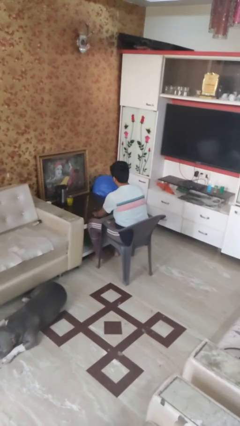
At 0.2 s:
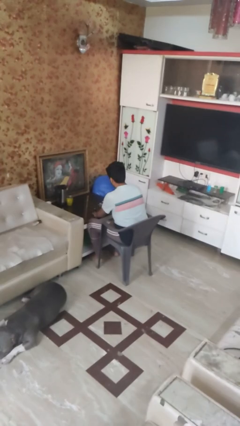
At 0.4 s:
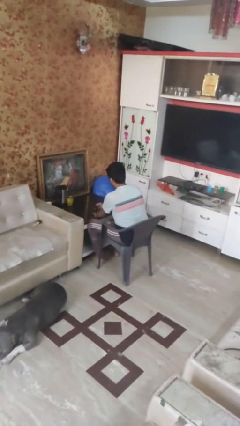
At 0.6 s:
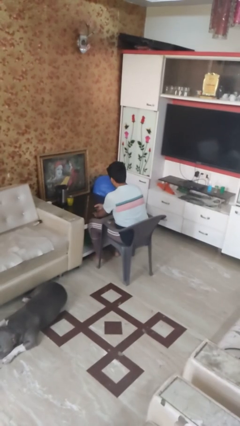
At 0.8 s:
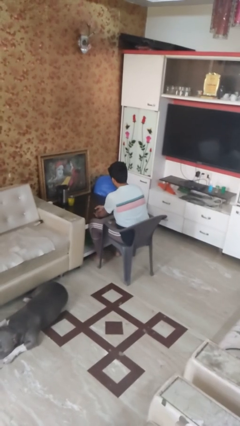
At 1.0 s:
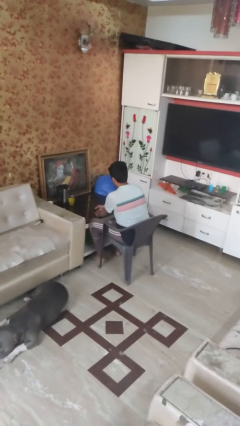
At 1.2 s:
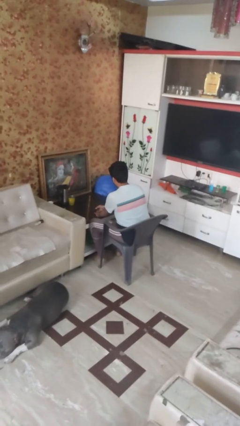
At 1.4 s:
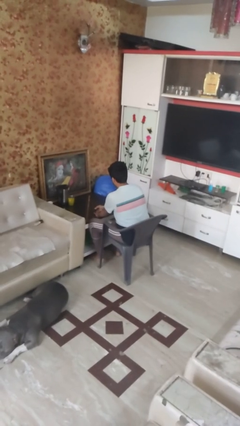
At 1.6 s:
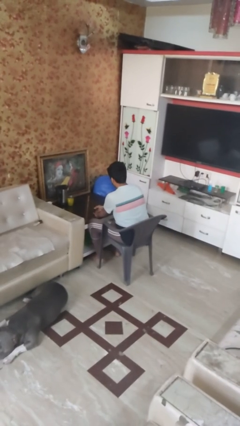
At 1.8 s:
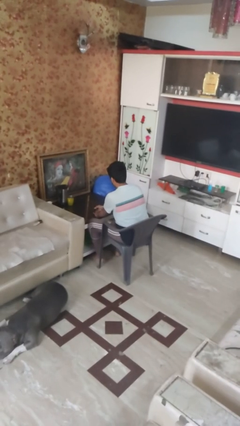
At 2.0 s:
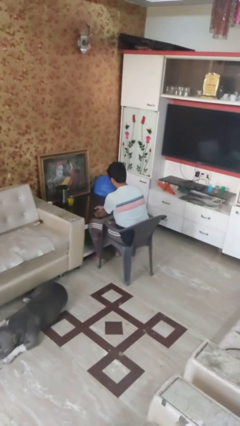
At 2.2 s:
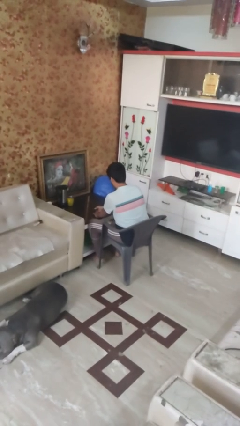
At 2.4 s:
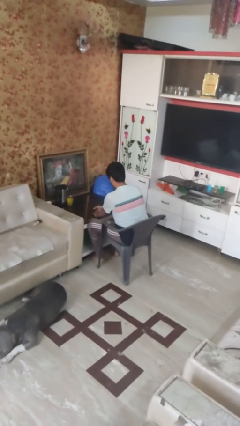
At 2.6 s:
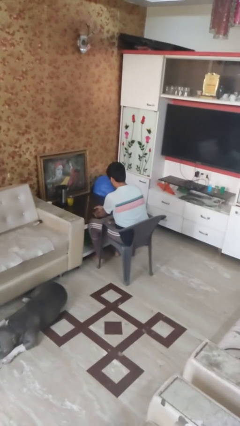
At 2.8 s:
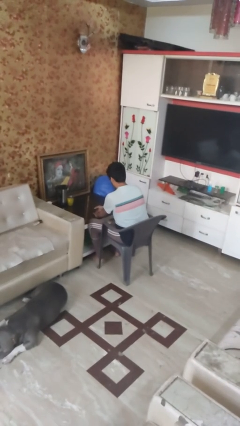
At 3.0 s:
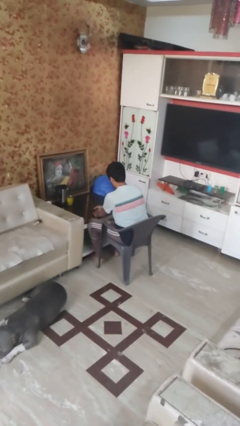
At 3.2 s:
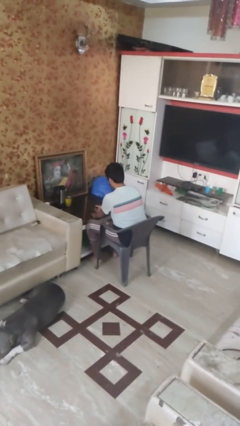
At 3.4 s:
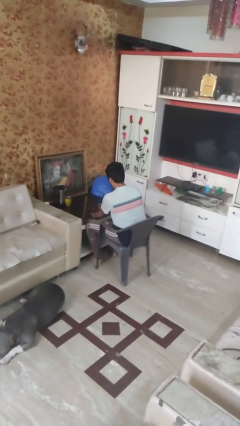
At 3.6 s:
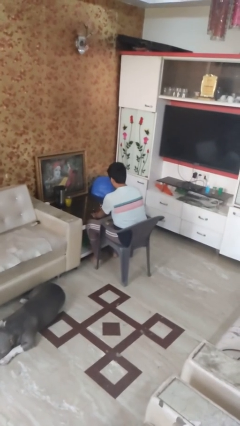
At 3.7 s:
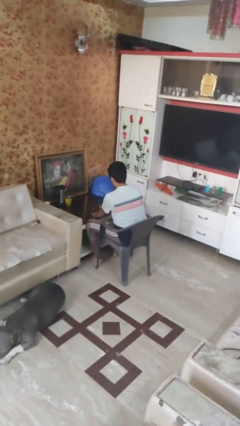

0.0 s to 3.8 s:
person paints fingernails

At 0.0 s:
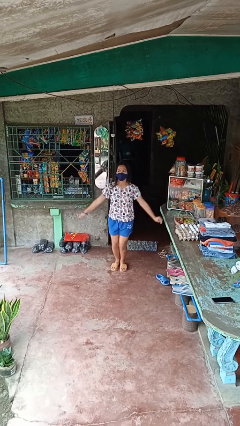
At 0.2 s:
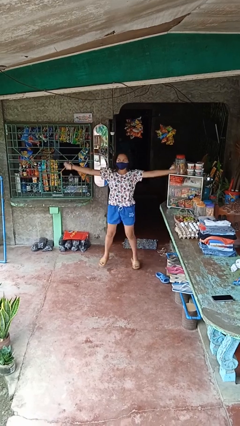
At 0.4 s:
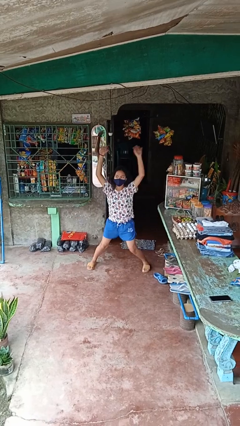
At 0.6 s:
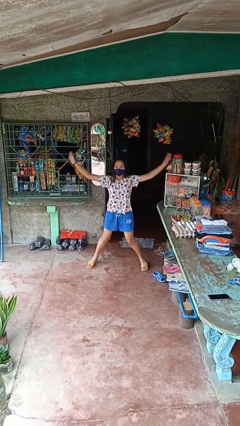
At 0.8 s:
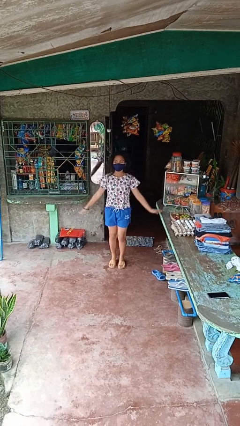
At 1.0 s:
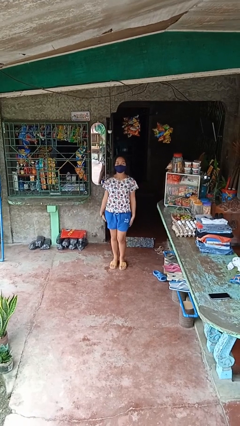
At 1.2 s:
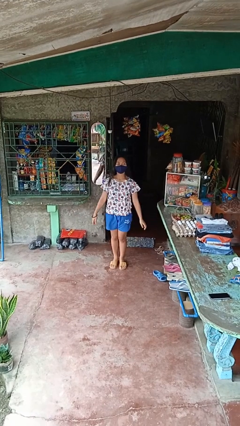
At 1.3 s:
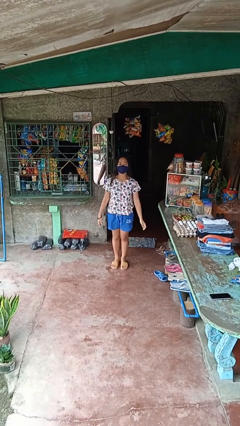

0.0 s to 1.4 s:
person exercises with jumping jacks

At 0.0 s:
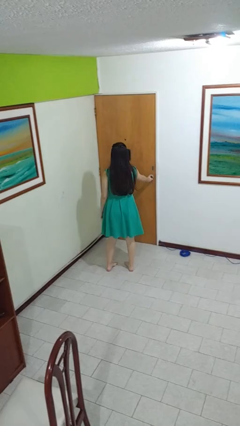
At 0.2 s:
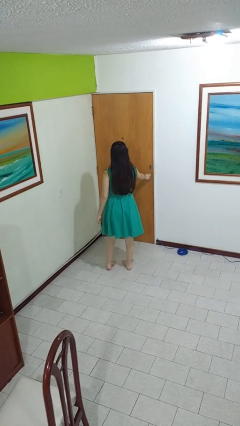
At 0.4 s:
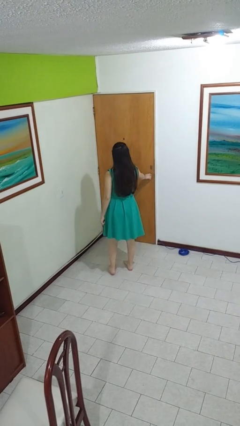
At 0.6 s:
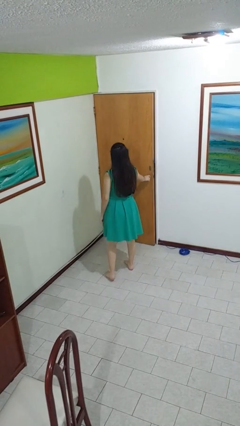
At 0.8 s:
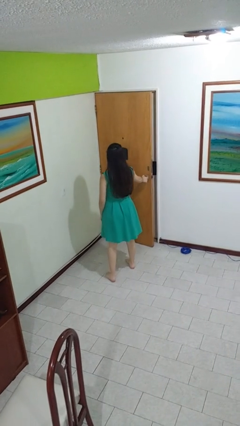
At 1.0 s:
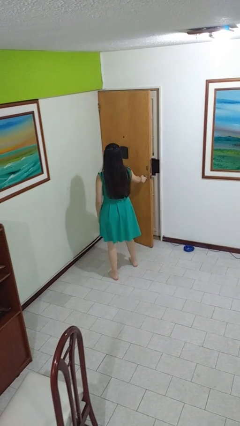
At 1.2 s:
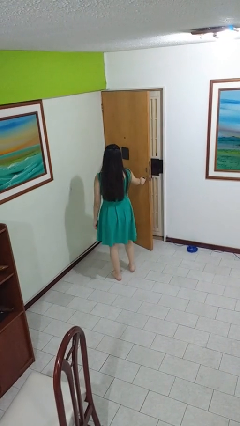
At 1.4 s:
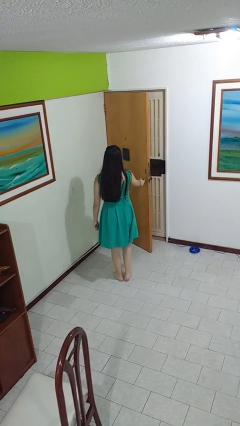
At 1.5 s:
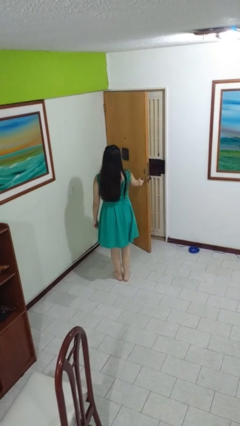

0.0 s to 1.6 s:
person opens facility door

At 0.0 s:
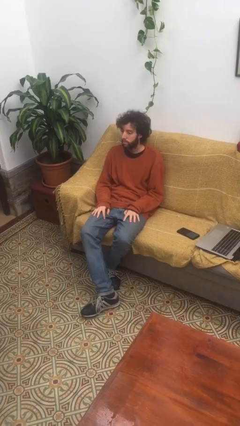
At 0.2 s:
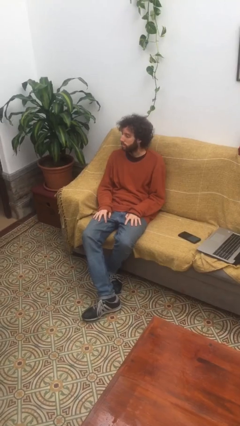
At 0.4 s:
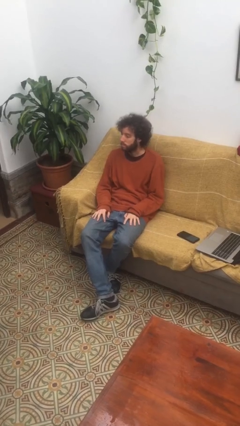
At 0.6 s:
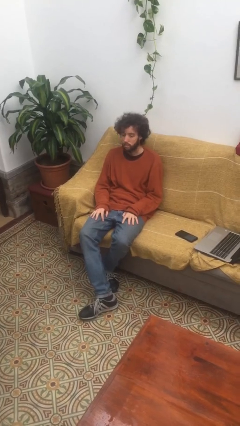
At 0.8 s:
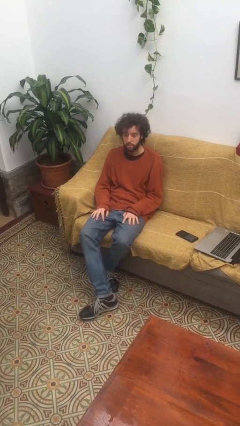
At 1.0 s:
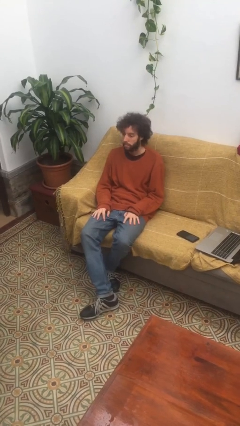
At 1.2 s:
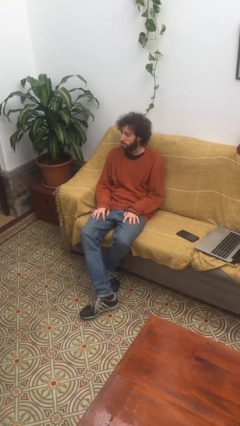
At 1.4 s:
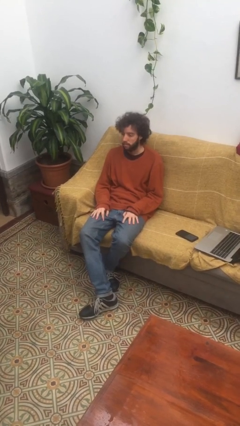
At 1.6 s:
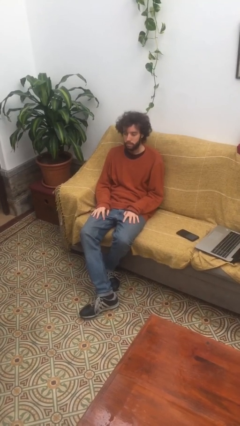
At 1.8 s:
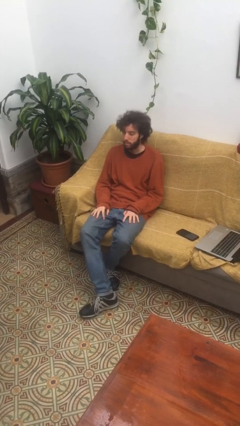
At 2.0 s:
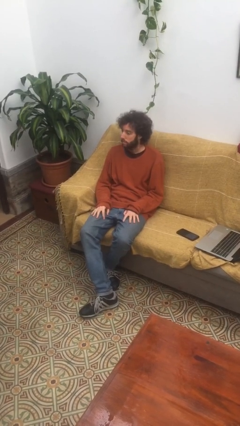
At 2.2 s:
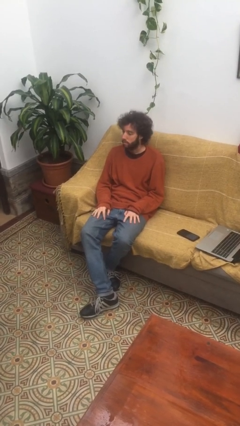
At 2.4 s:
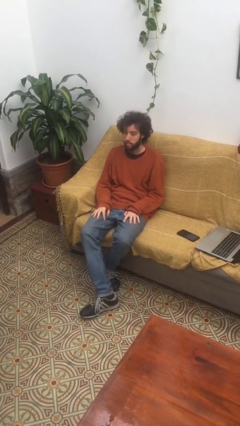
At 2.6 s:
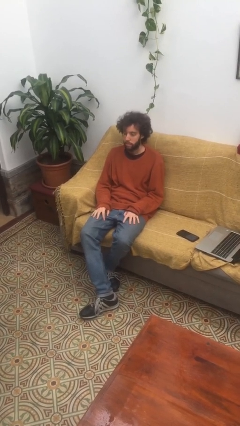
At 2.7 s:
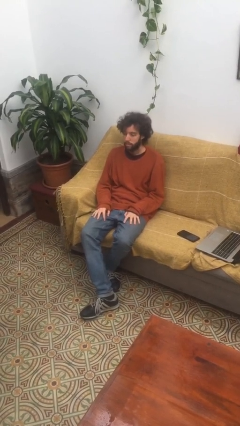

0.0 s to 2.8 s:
person shakes head

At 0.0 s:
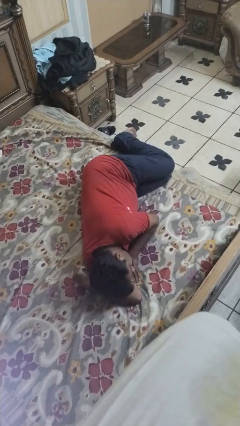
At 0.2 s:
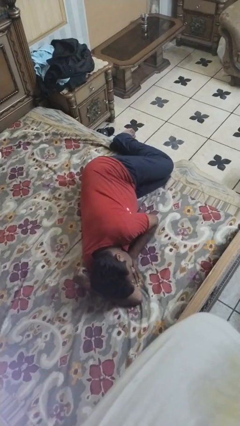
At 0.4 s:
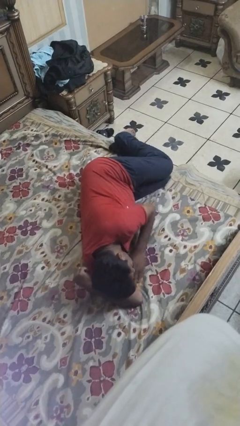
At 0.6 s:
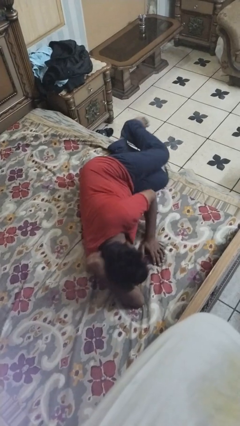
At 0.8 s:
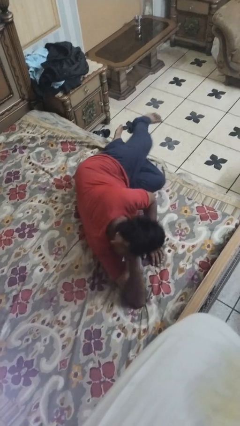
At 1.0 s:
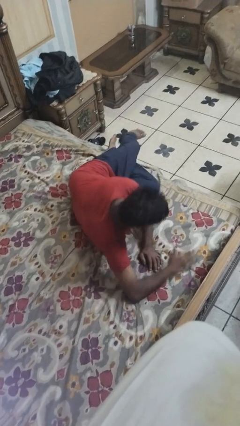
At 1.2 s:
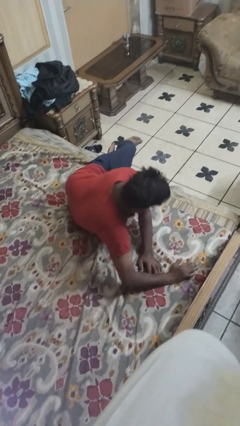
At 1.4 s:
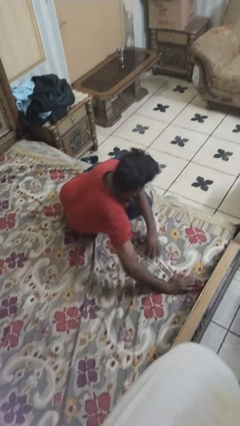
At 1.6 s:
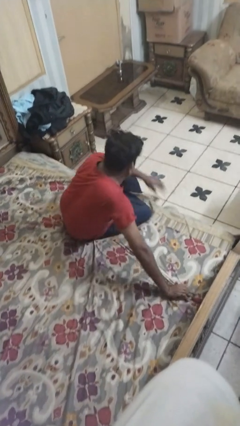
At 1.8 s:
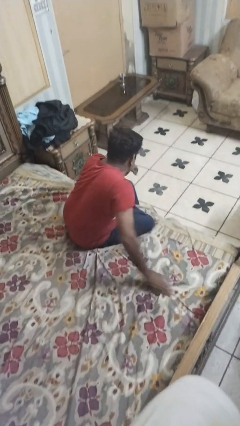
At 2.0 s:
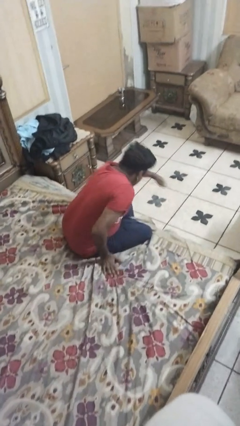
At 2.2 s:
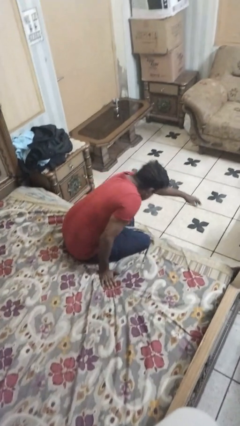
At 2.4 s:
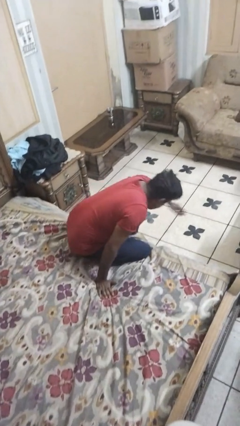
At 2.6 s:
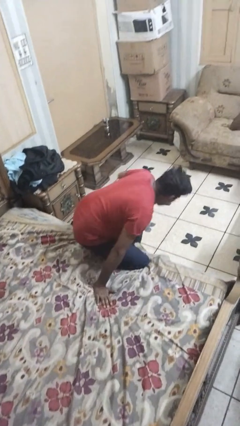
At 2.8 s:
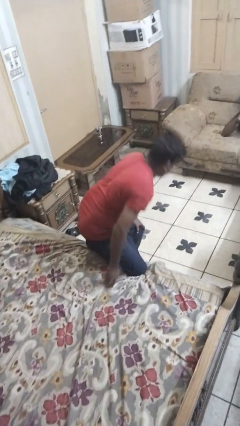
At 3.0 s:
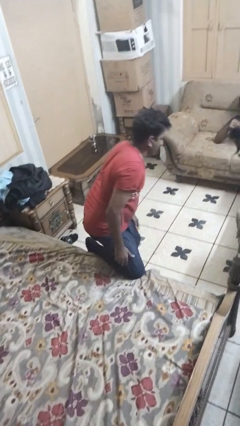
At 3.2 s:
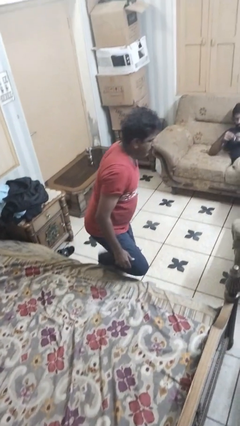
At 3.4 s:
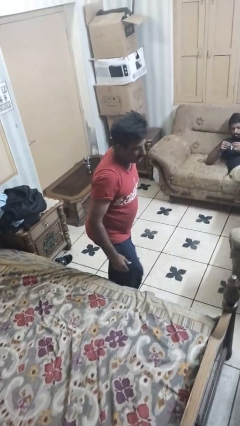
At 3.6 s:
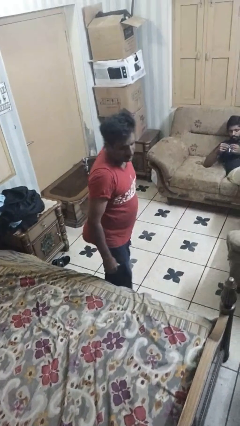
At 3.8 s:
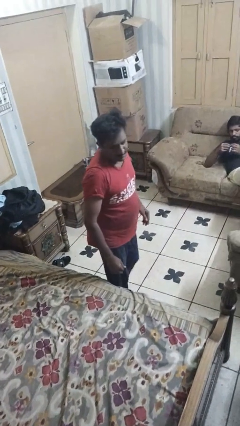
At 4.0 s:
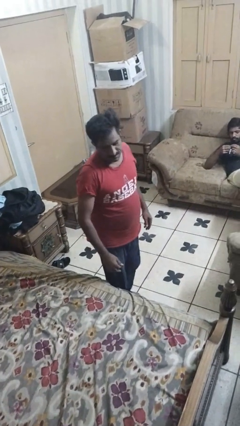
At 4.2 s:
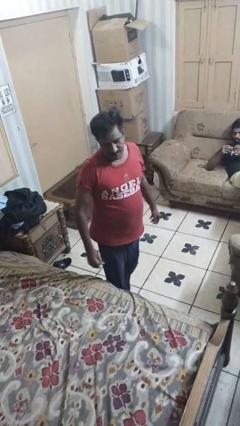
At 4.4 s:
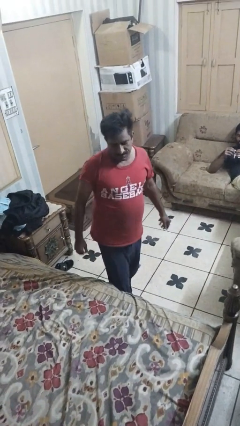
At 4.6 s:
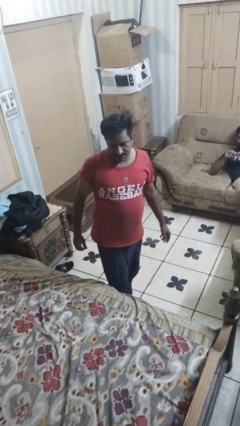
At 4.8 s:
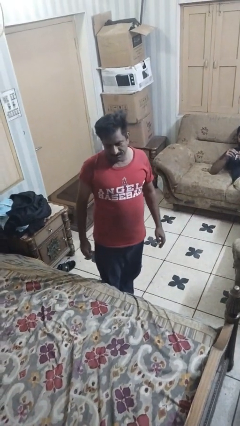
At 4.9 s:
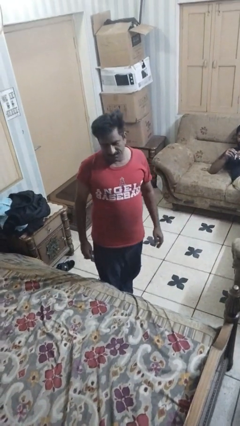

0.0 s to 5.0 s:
person stands up

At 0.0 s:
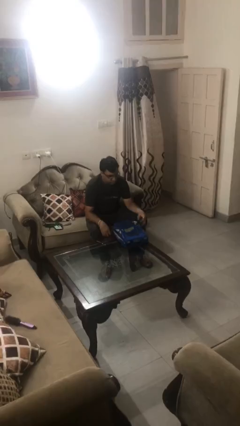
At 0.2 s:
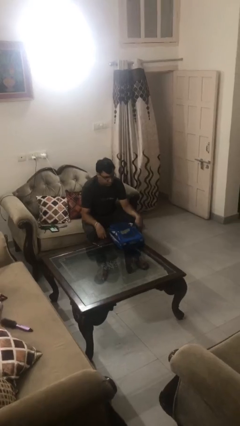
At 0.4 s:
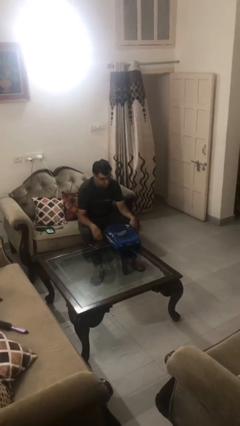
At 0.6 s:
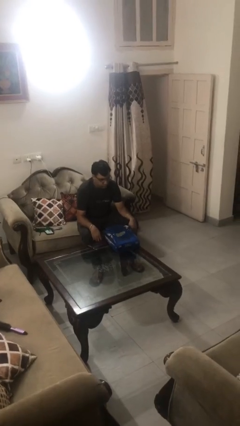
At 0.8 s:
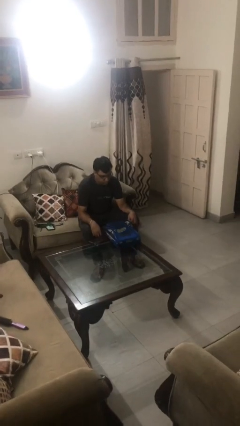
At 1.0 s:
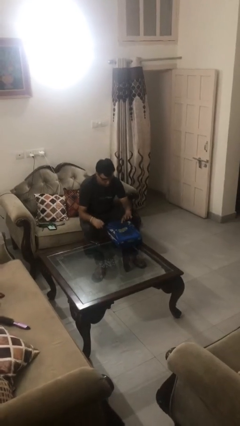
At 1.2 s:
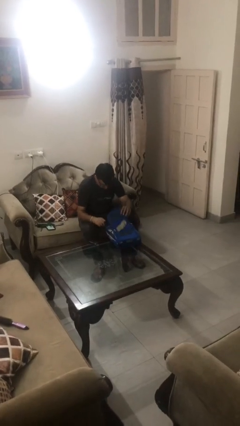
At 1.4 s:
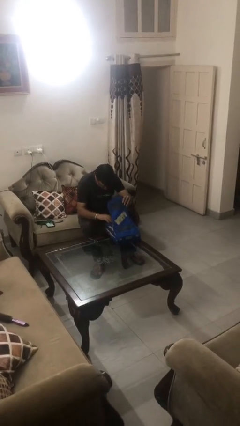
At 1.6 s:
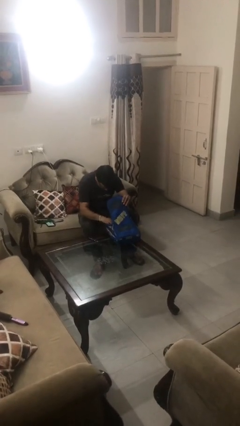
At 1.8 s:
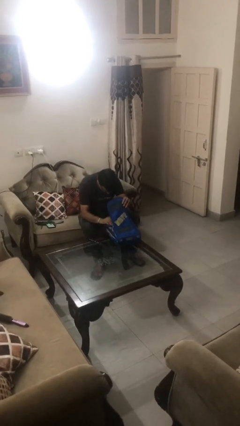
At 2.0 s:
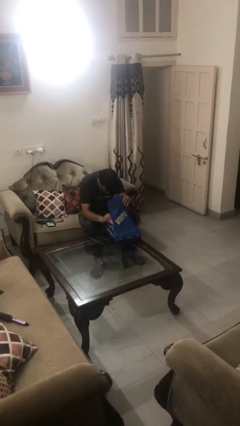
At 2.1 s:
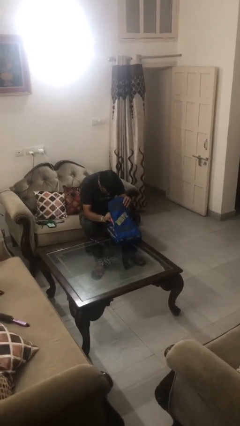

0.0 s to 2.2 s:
person searches in backpack

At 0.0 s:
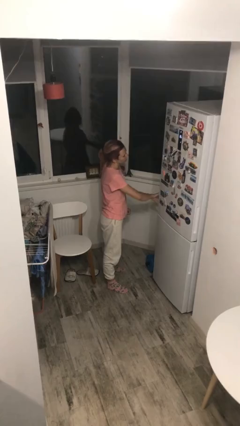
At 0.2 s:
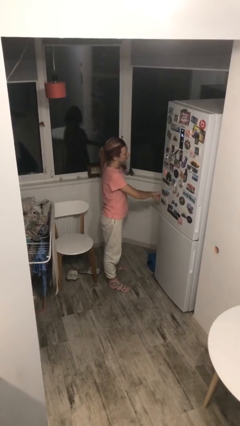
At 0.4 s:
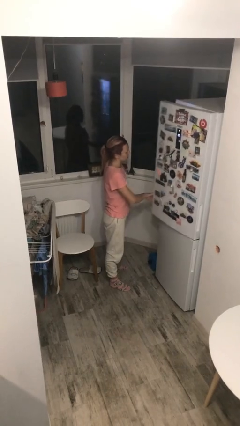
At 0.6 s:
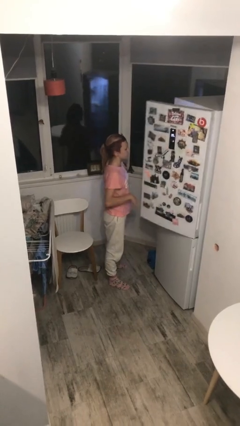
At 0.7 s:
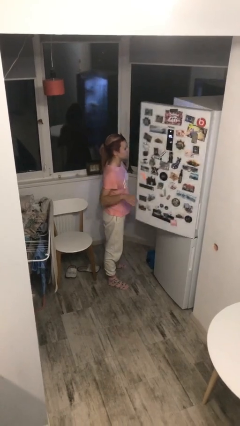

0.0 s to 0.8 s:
person opens refrigerator
